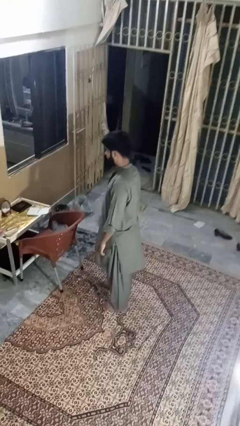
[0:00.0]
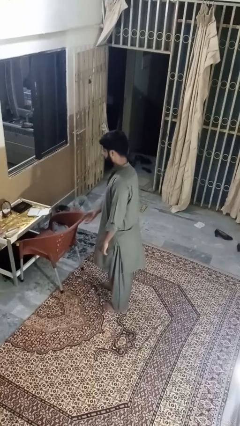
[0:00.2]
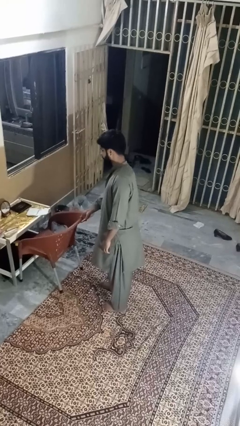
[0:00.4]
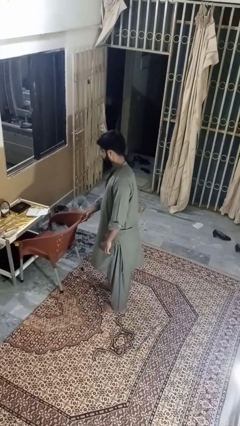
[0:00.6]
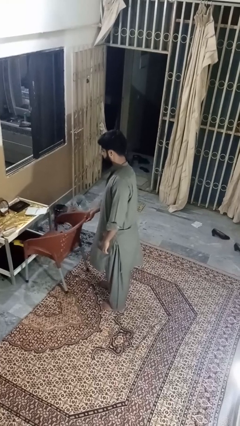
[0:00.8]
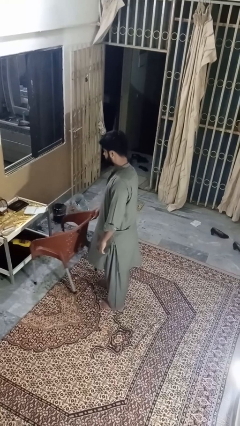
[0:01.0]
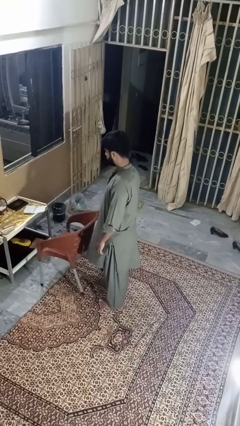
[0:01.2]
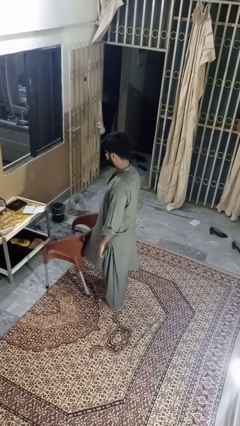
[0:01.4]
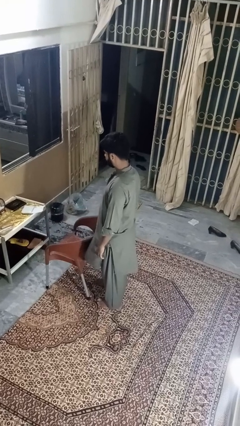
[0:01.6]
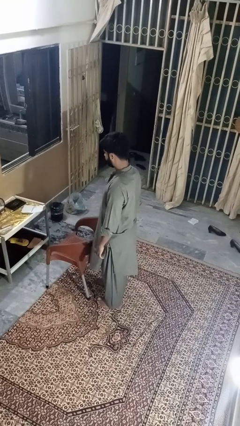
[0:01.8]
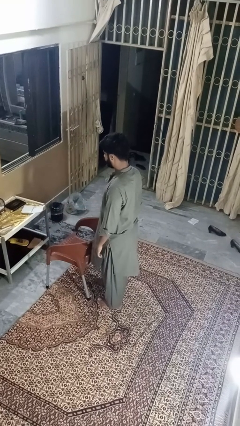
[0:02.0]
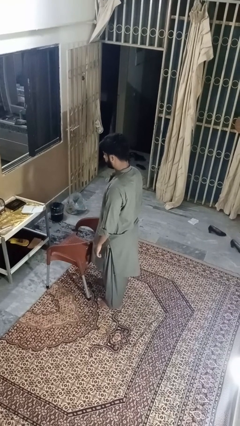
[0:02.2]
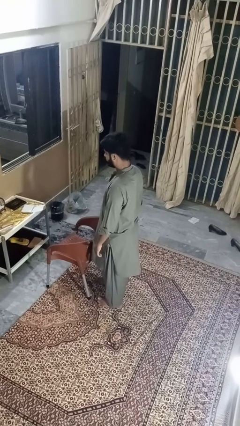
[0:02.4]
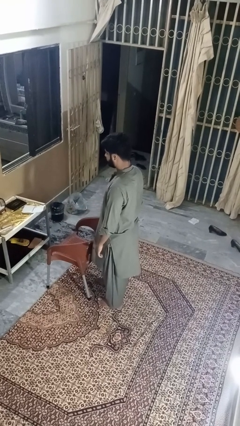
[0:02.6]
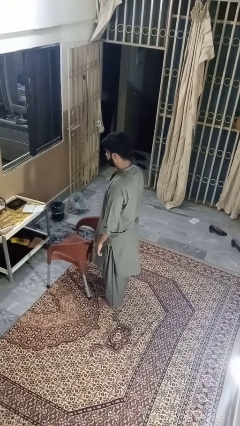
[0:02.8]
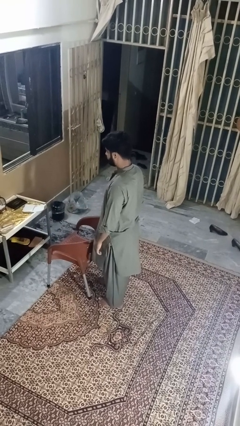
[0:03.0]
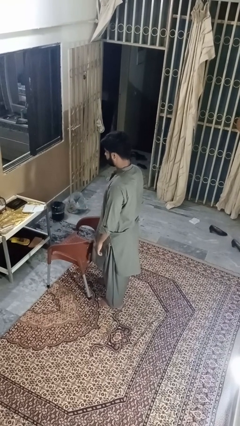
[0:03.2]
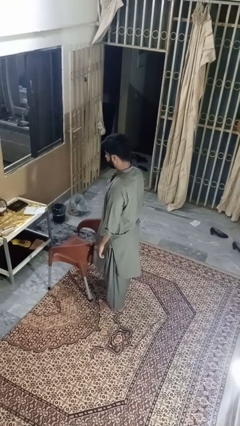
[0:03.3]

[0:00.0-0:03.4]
person pulls out chair

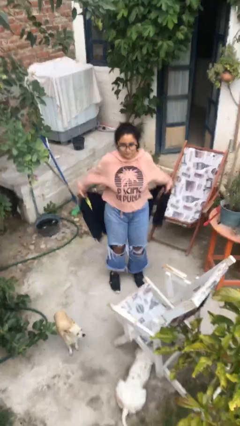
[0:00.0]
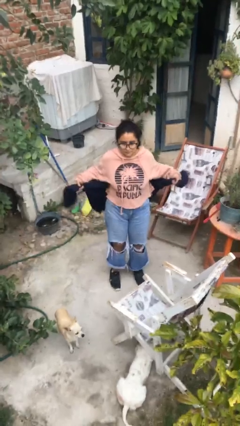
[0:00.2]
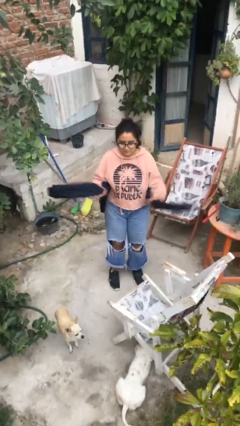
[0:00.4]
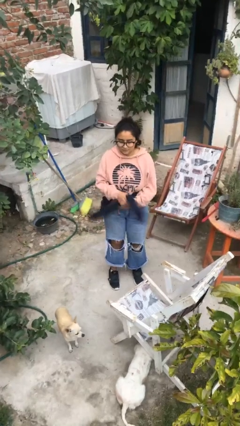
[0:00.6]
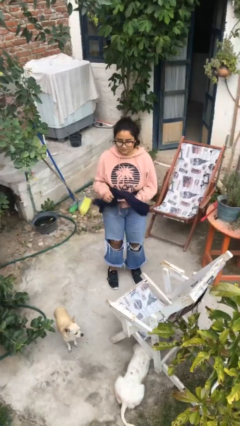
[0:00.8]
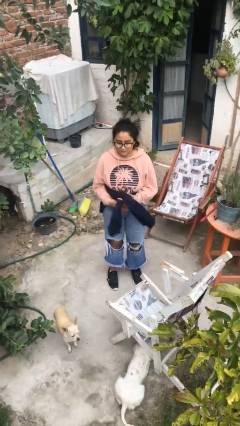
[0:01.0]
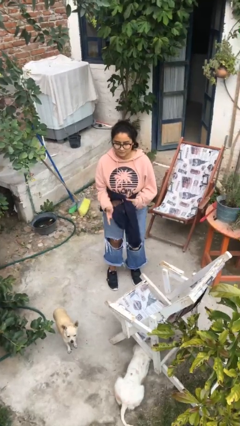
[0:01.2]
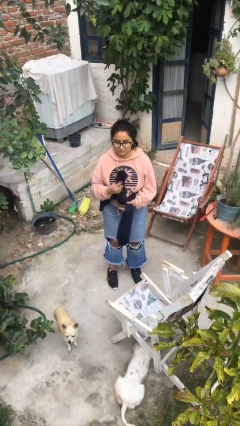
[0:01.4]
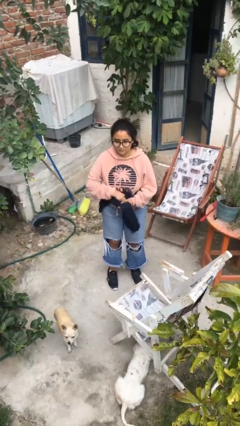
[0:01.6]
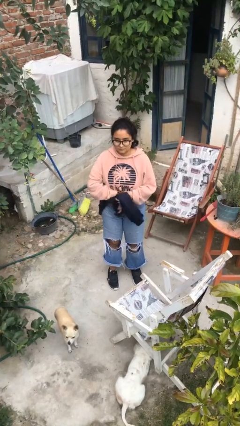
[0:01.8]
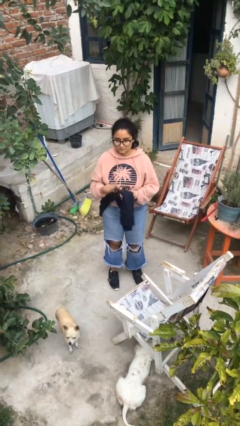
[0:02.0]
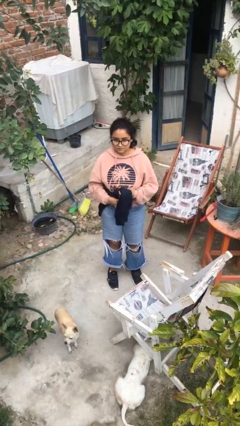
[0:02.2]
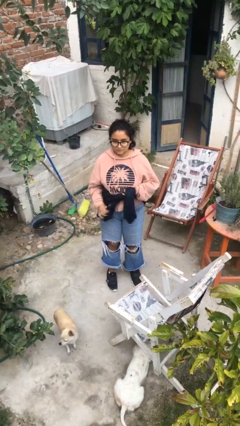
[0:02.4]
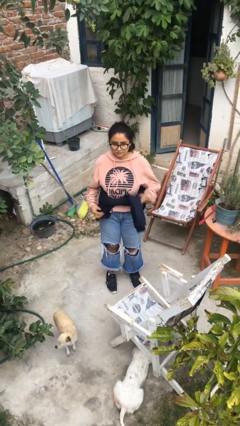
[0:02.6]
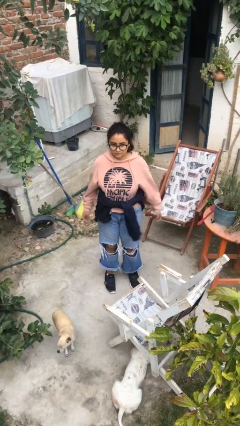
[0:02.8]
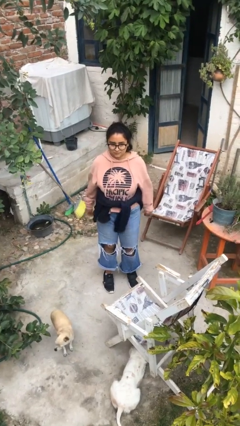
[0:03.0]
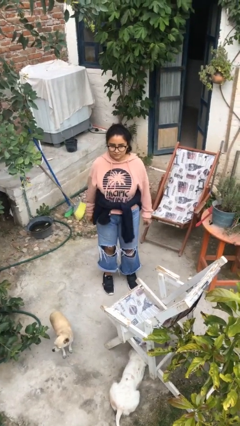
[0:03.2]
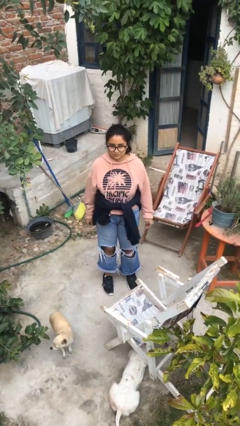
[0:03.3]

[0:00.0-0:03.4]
person ties jacket around waist

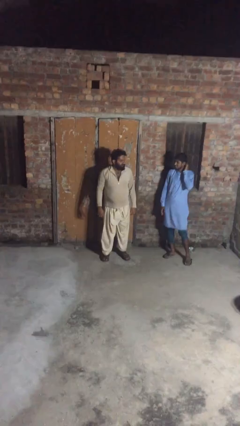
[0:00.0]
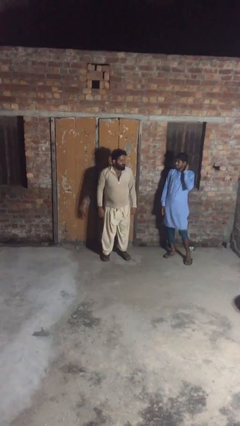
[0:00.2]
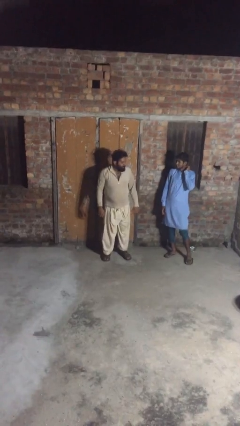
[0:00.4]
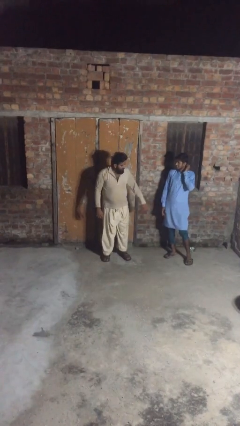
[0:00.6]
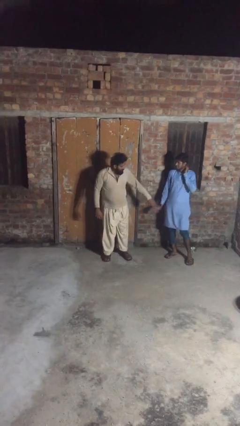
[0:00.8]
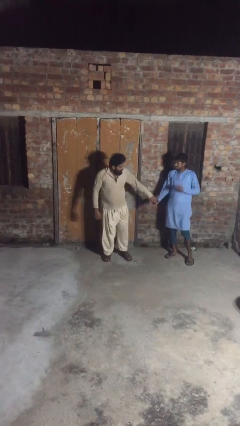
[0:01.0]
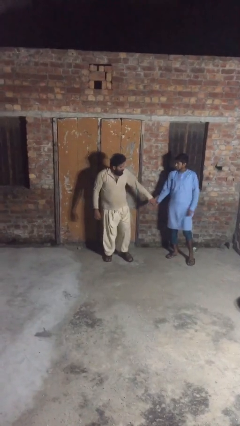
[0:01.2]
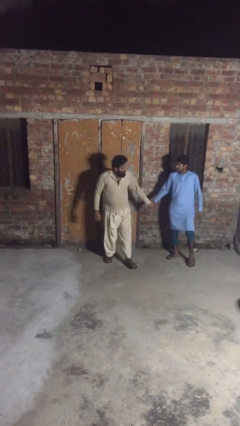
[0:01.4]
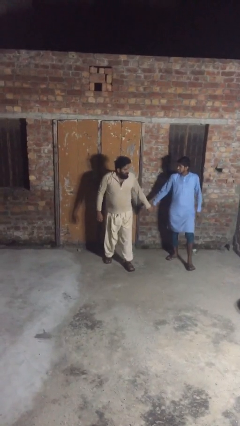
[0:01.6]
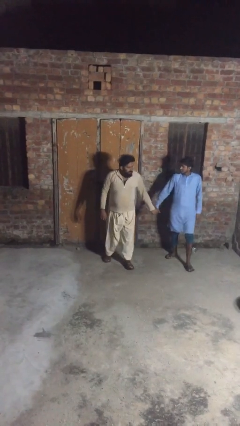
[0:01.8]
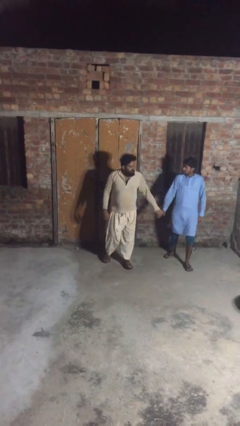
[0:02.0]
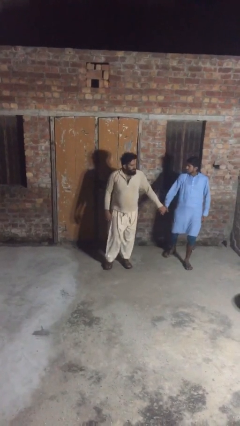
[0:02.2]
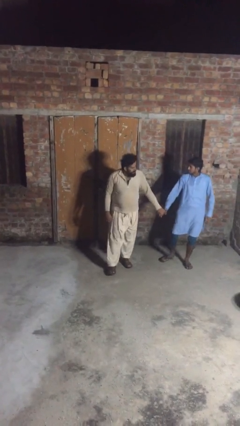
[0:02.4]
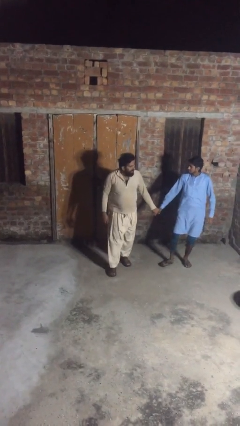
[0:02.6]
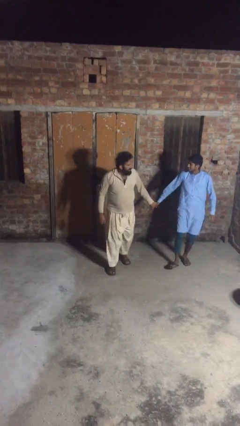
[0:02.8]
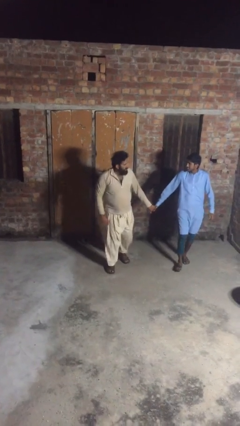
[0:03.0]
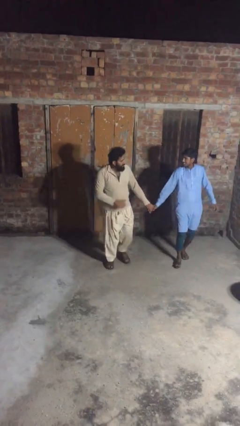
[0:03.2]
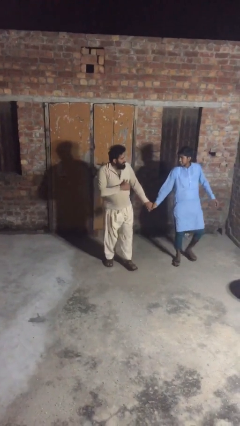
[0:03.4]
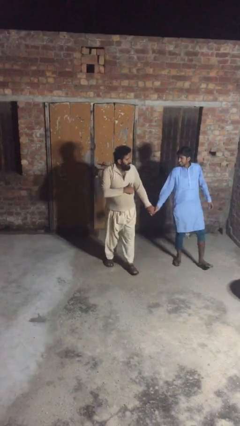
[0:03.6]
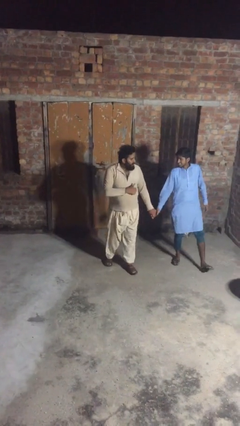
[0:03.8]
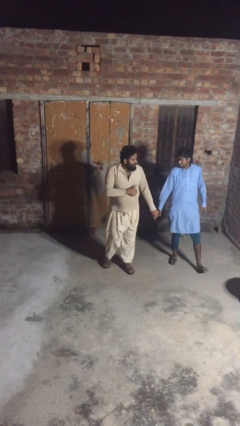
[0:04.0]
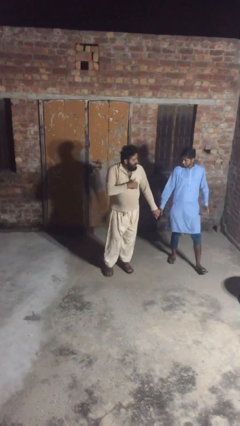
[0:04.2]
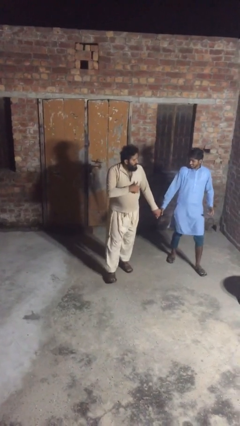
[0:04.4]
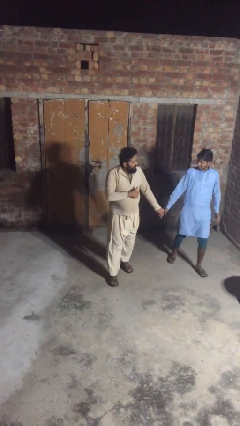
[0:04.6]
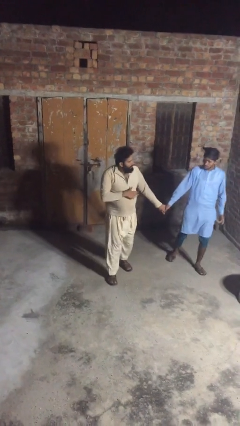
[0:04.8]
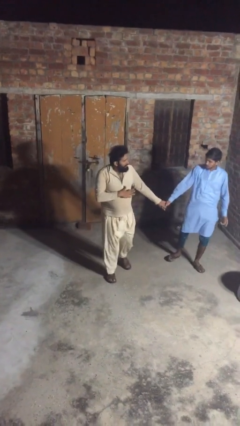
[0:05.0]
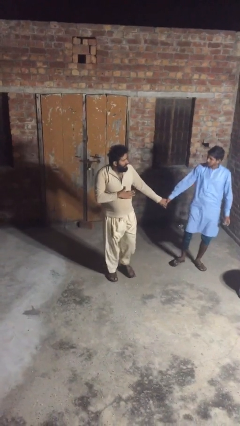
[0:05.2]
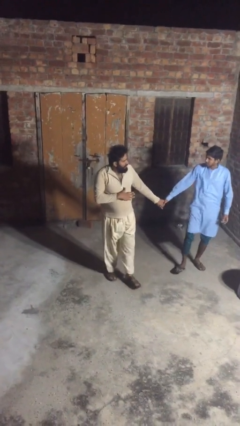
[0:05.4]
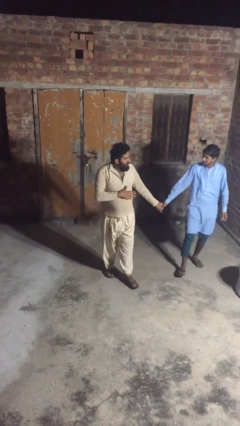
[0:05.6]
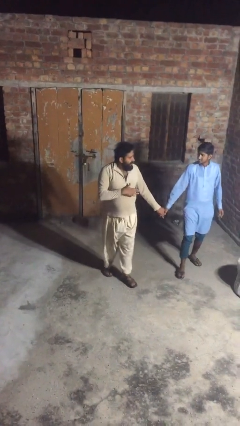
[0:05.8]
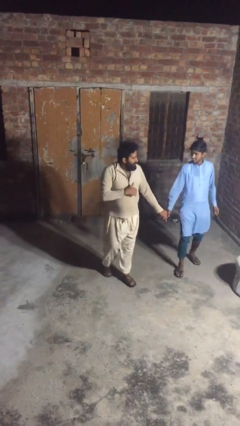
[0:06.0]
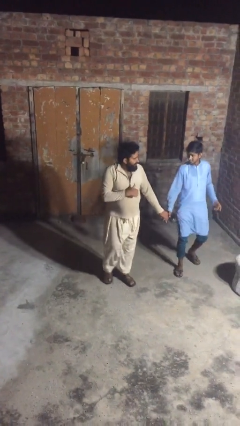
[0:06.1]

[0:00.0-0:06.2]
person holds hand

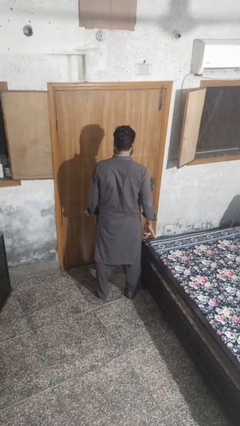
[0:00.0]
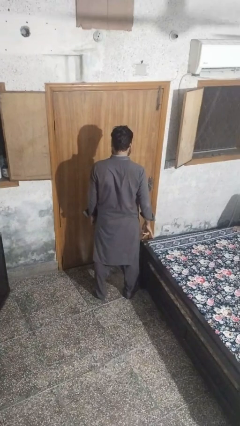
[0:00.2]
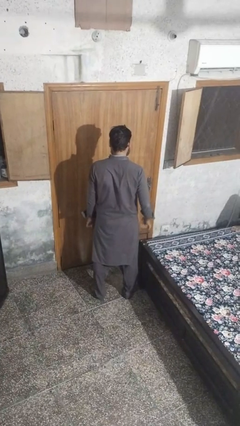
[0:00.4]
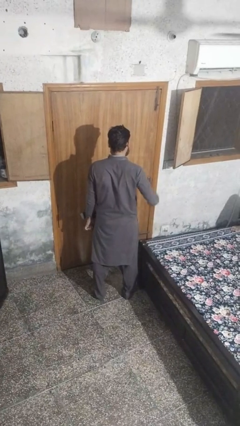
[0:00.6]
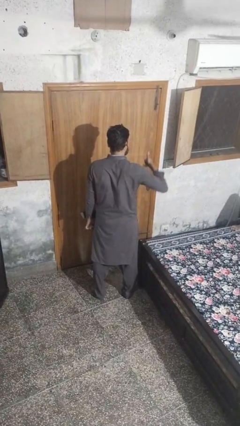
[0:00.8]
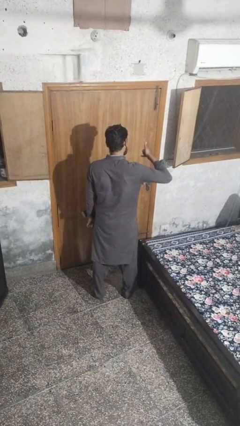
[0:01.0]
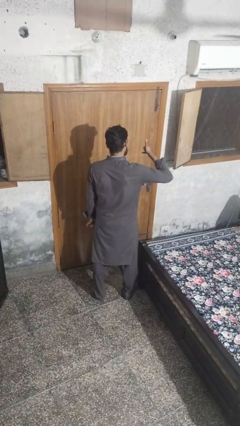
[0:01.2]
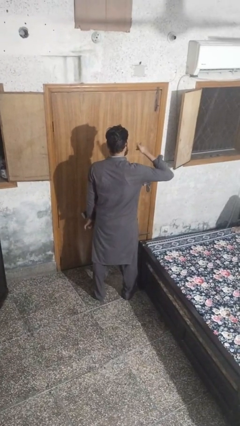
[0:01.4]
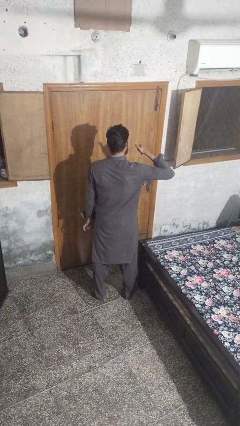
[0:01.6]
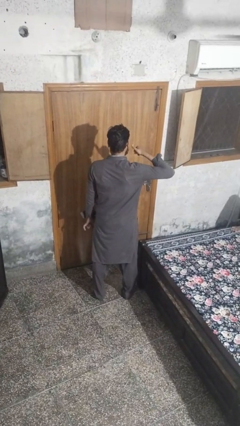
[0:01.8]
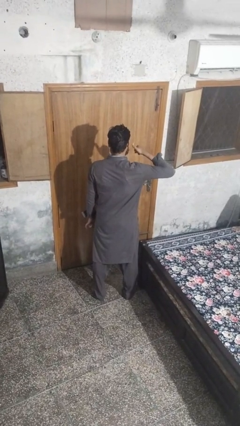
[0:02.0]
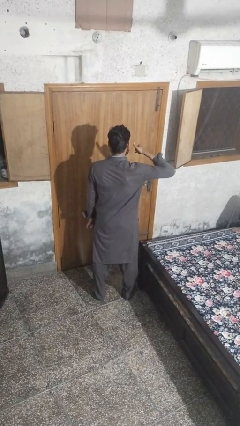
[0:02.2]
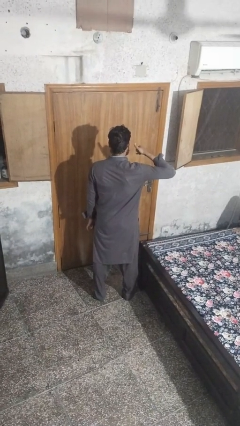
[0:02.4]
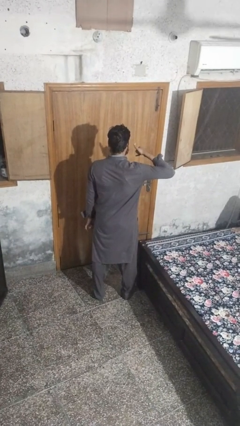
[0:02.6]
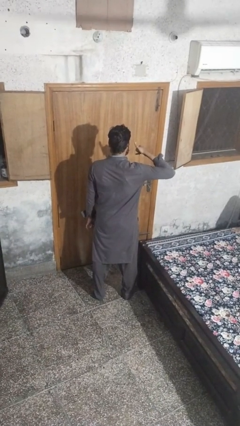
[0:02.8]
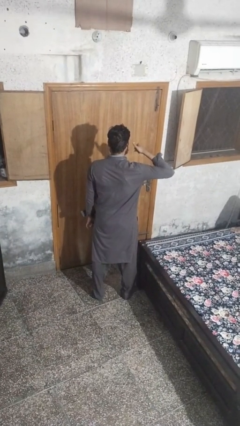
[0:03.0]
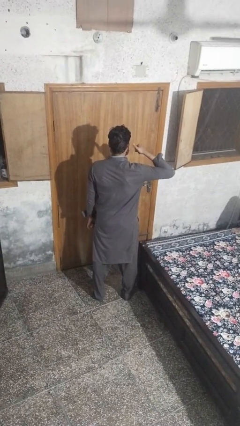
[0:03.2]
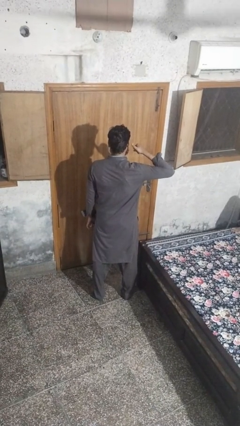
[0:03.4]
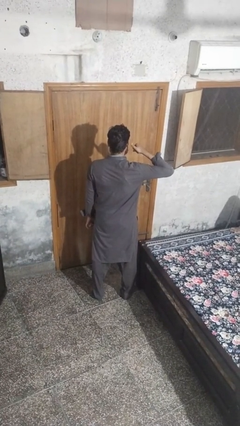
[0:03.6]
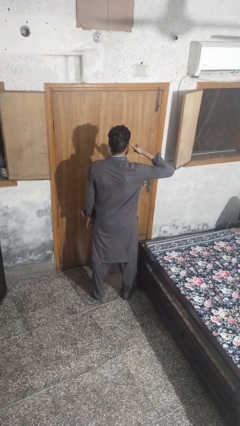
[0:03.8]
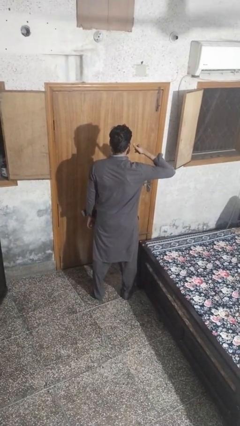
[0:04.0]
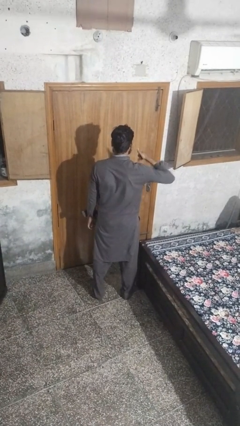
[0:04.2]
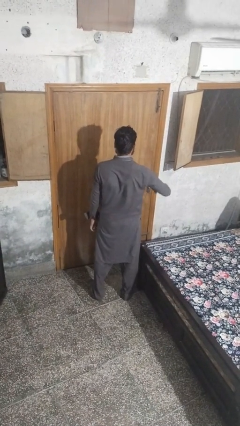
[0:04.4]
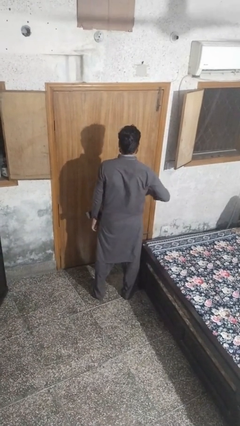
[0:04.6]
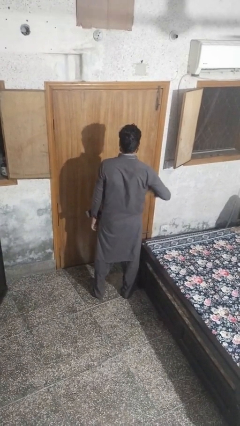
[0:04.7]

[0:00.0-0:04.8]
person gestures call me
